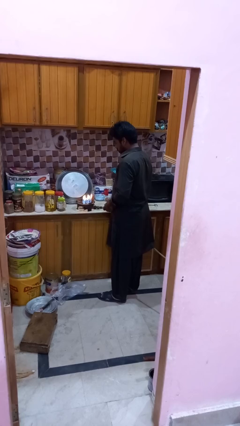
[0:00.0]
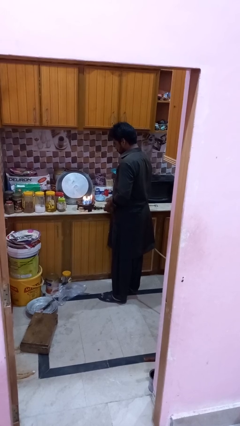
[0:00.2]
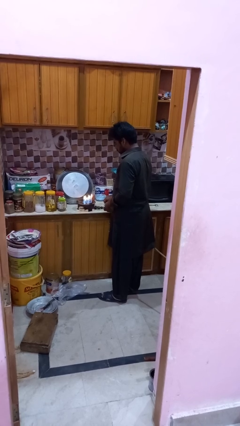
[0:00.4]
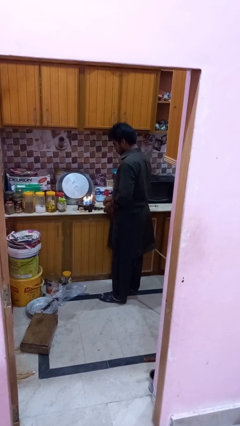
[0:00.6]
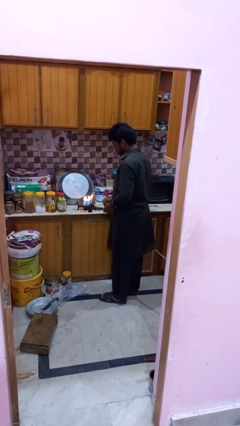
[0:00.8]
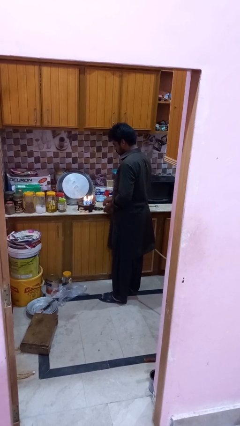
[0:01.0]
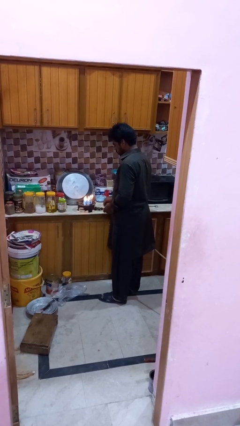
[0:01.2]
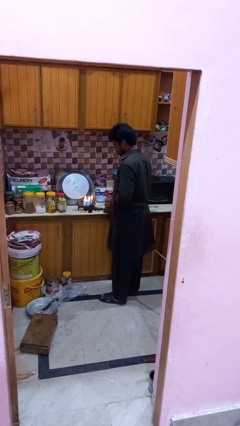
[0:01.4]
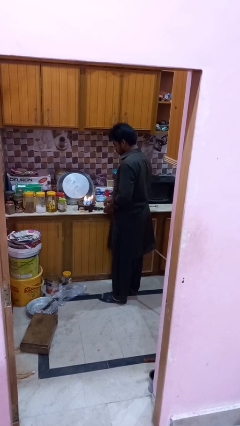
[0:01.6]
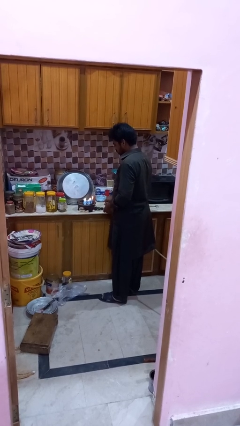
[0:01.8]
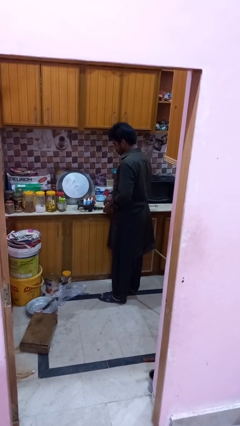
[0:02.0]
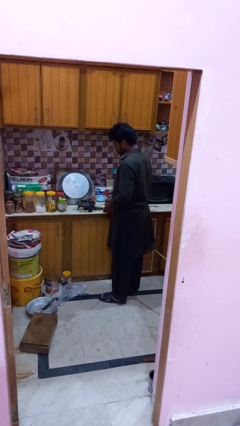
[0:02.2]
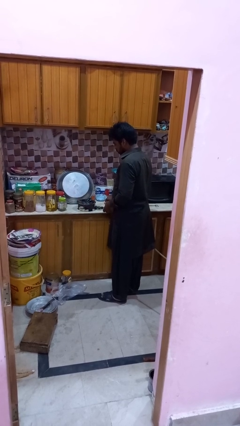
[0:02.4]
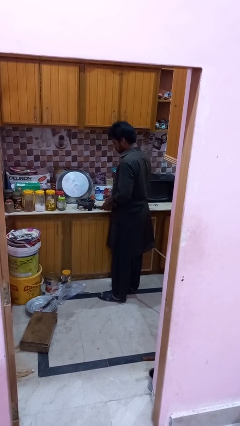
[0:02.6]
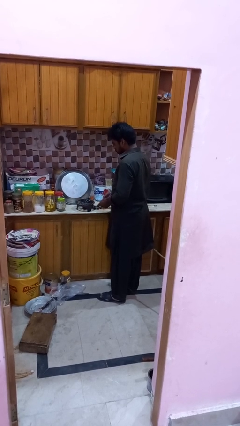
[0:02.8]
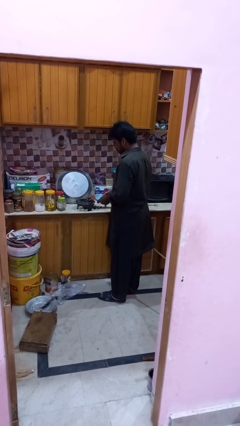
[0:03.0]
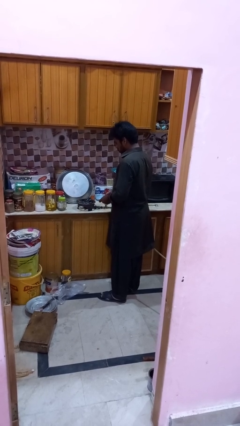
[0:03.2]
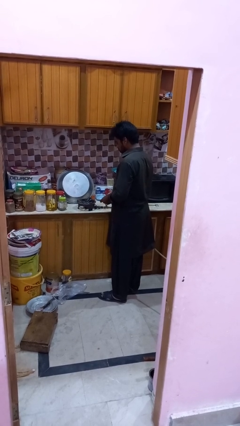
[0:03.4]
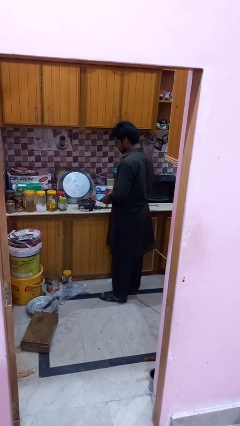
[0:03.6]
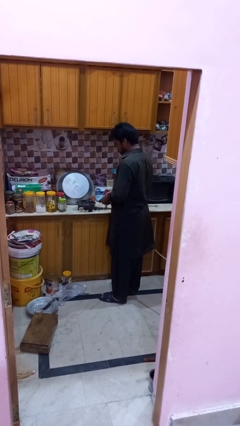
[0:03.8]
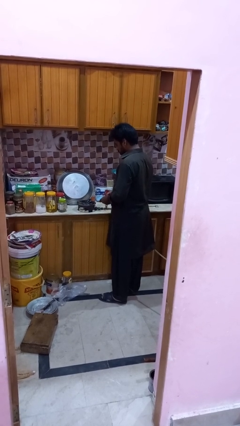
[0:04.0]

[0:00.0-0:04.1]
person turns off stovetop

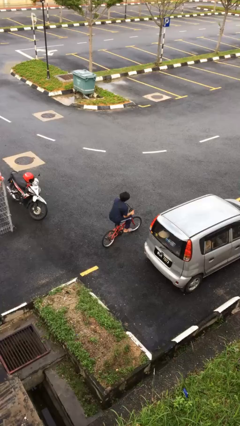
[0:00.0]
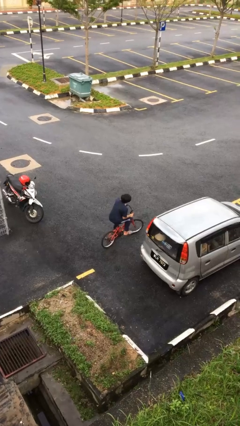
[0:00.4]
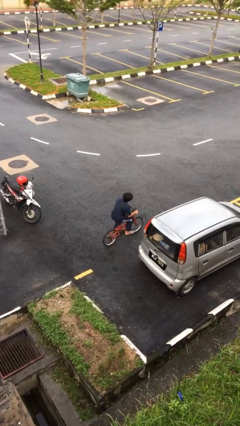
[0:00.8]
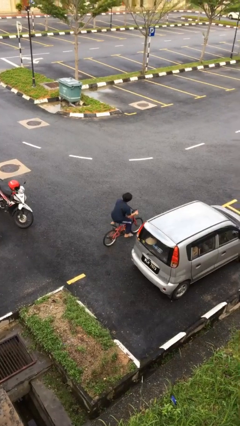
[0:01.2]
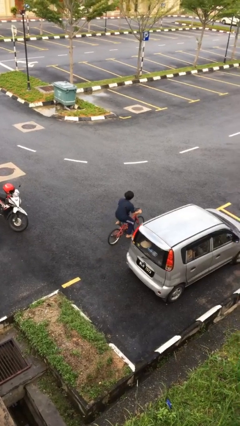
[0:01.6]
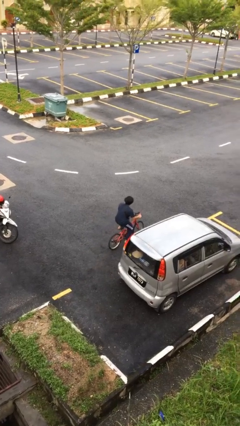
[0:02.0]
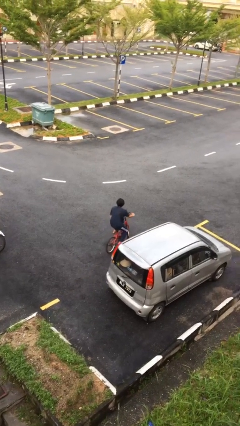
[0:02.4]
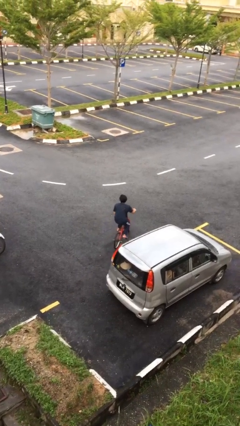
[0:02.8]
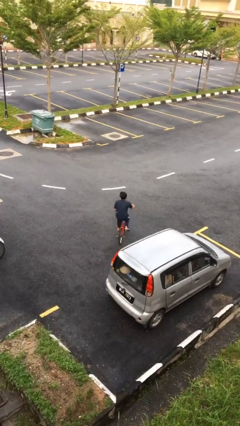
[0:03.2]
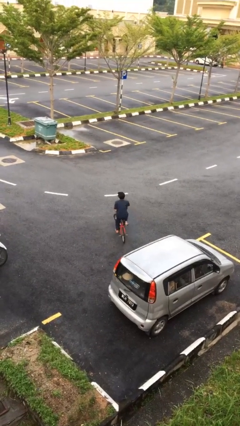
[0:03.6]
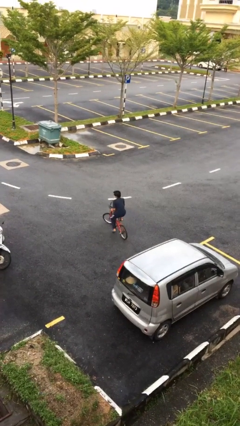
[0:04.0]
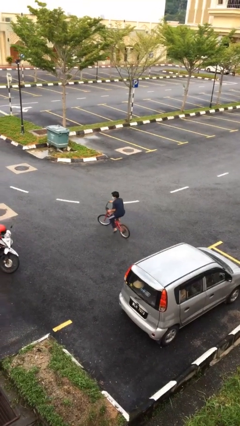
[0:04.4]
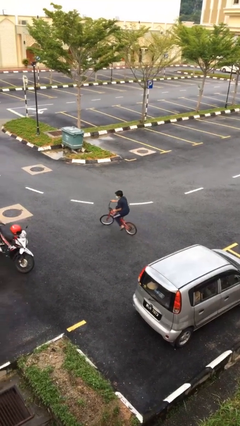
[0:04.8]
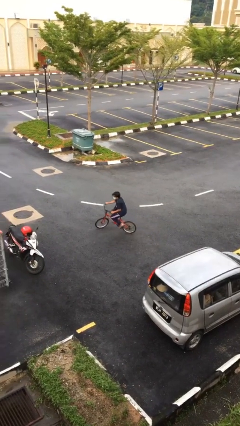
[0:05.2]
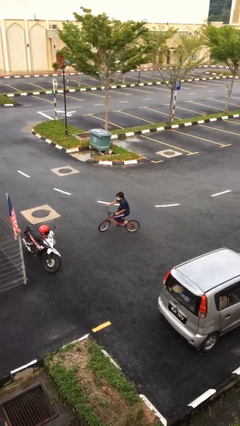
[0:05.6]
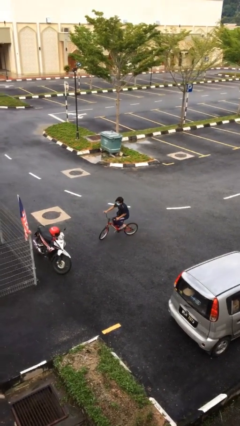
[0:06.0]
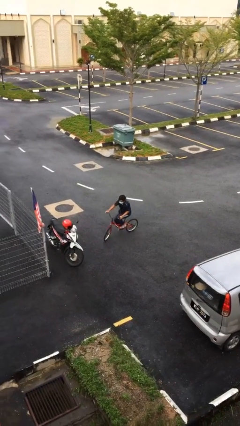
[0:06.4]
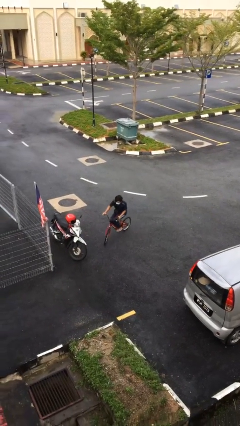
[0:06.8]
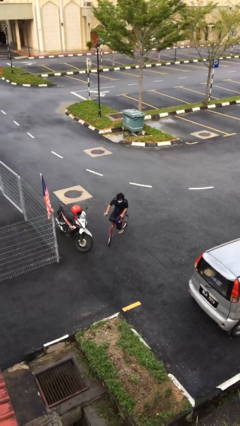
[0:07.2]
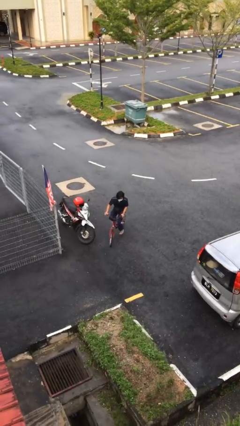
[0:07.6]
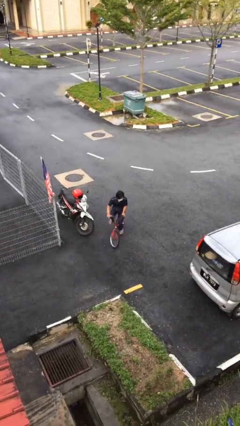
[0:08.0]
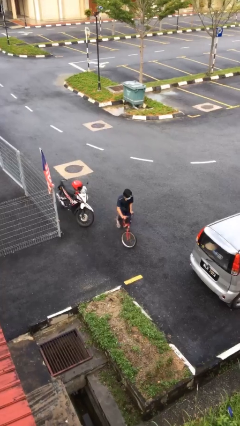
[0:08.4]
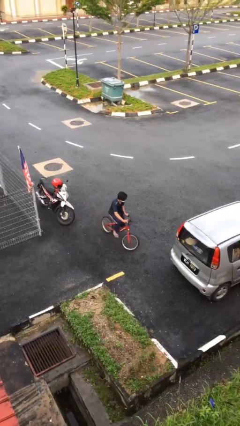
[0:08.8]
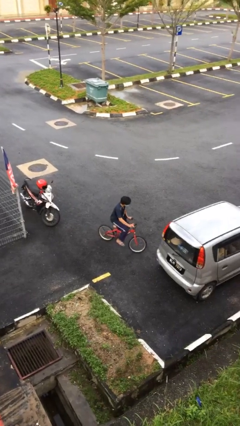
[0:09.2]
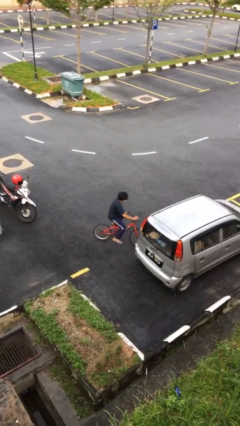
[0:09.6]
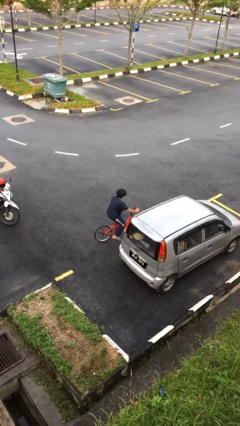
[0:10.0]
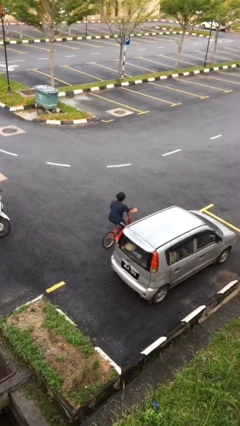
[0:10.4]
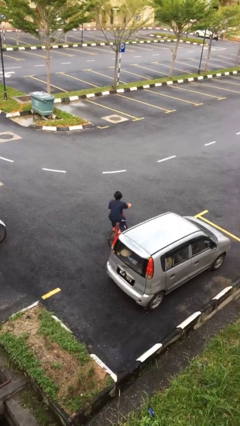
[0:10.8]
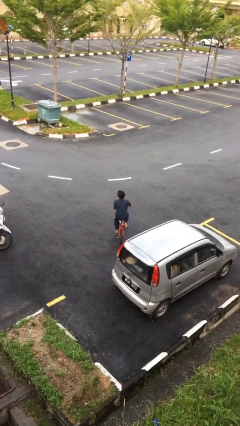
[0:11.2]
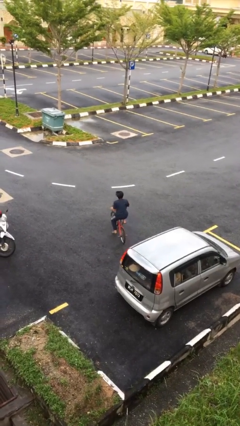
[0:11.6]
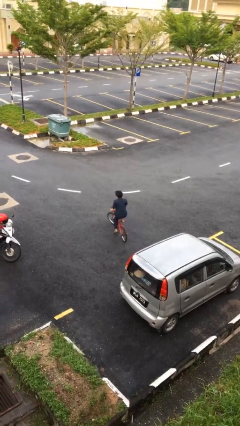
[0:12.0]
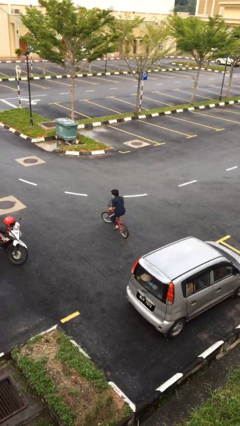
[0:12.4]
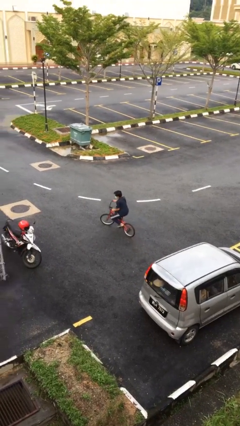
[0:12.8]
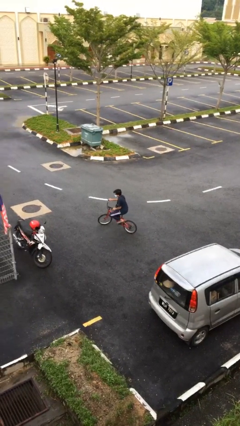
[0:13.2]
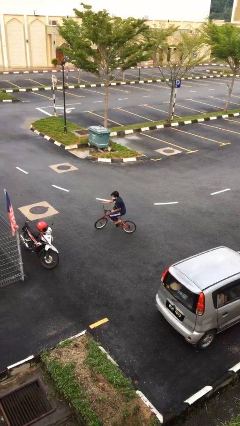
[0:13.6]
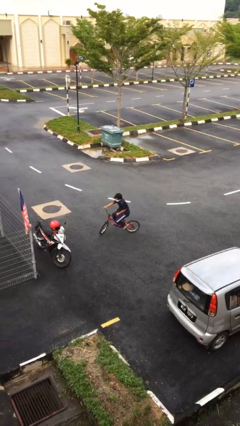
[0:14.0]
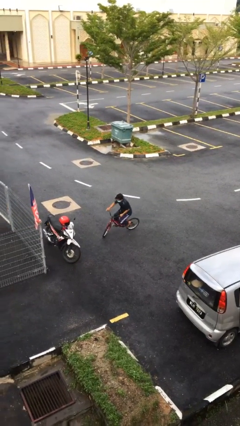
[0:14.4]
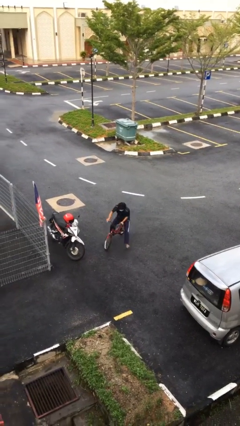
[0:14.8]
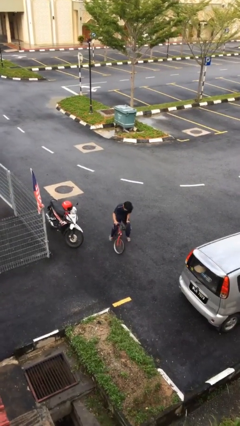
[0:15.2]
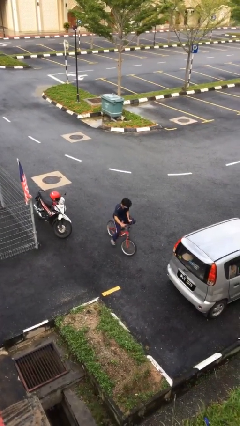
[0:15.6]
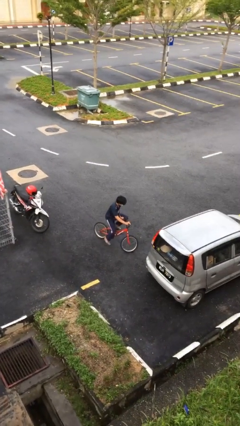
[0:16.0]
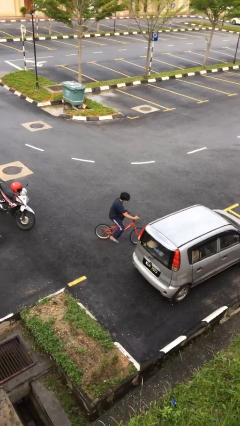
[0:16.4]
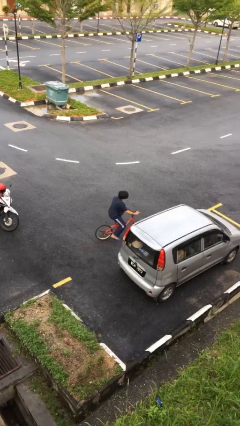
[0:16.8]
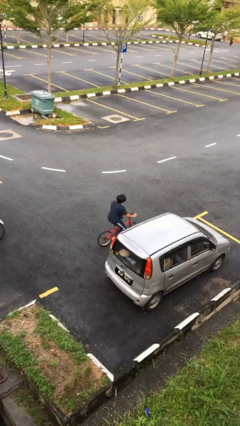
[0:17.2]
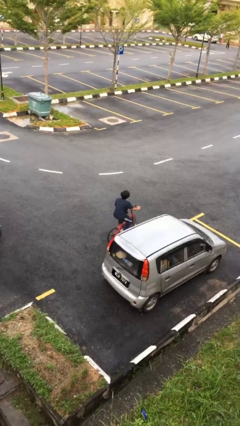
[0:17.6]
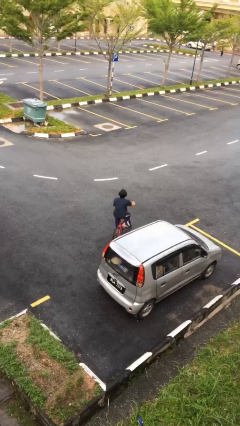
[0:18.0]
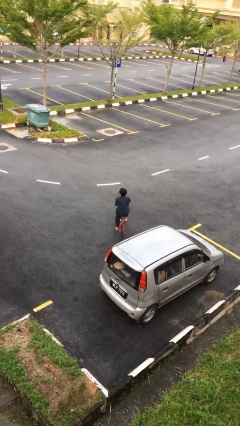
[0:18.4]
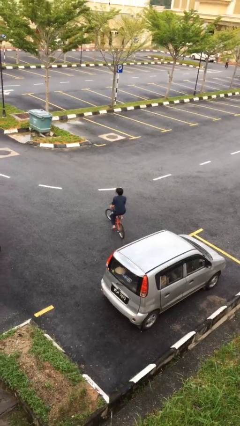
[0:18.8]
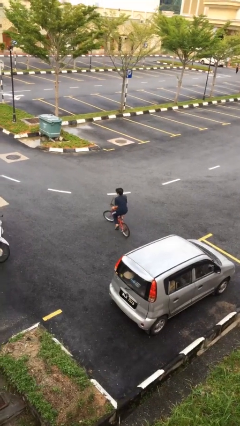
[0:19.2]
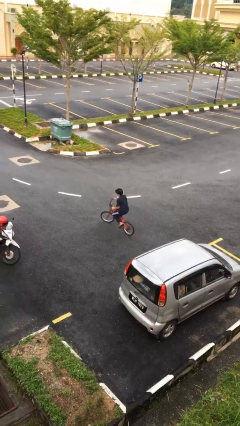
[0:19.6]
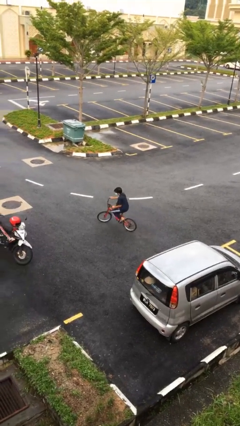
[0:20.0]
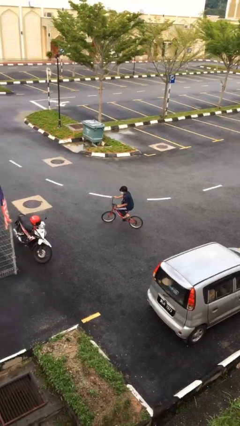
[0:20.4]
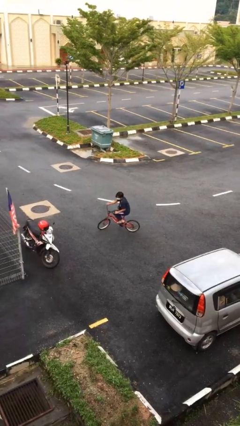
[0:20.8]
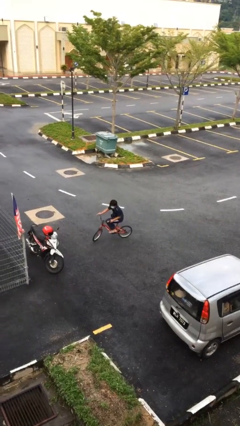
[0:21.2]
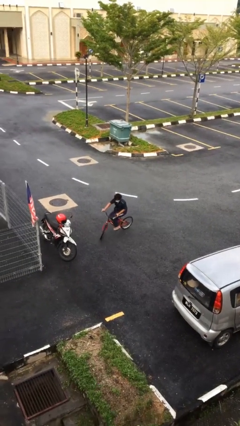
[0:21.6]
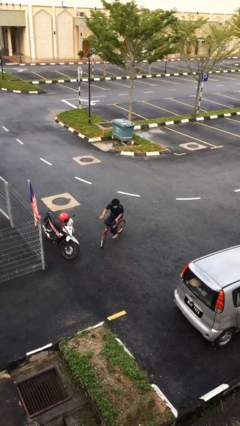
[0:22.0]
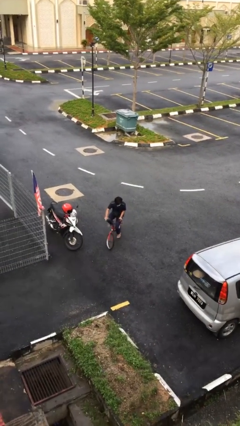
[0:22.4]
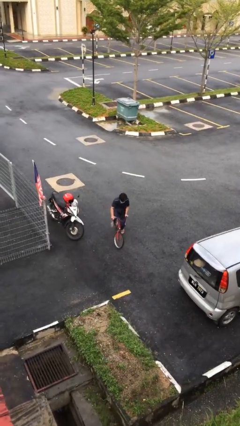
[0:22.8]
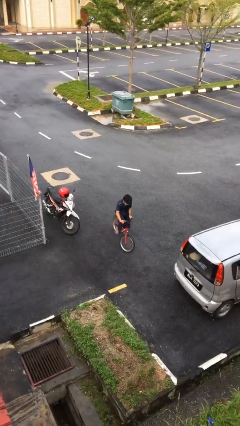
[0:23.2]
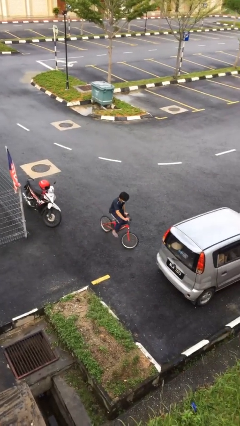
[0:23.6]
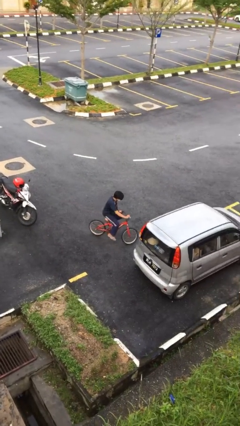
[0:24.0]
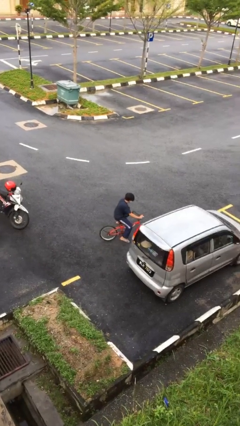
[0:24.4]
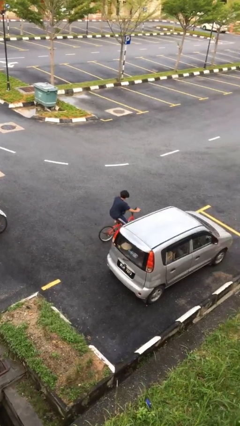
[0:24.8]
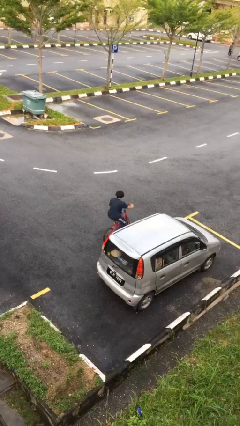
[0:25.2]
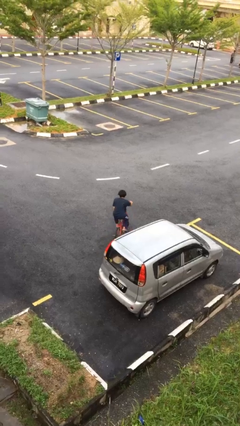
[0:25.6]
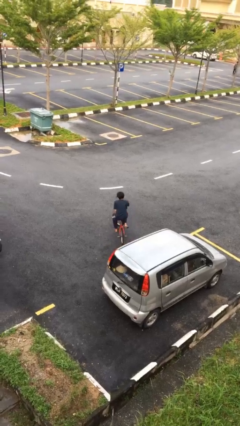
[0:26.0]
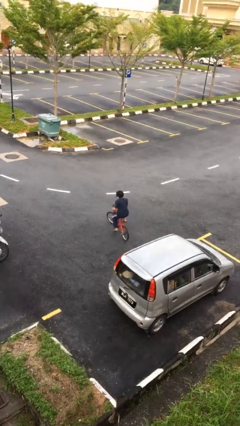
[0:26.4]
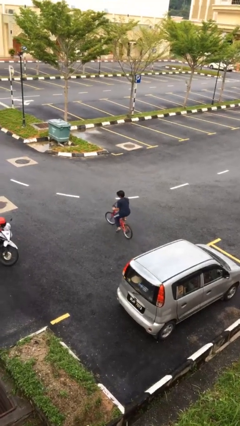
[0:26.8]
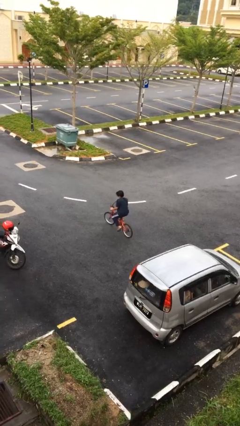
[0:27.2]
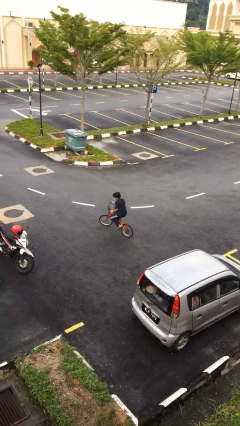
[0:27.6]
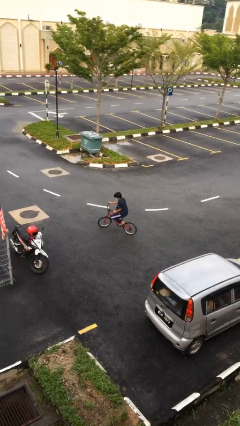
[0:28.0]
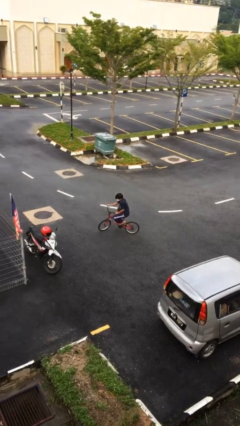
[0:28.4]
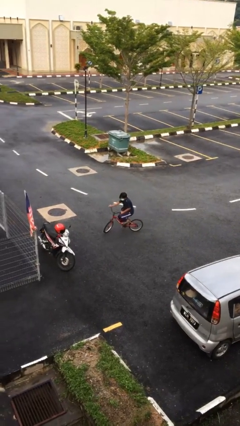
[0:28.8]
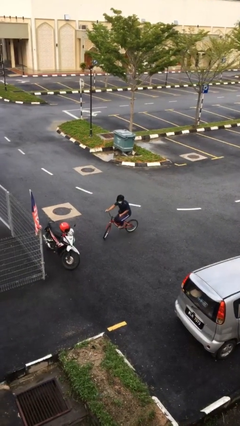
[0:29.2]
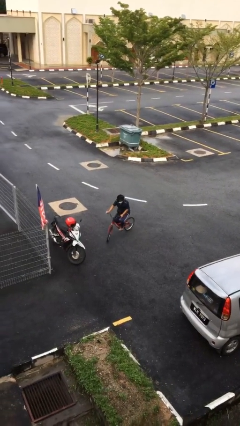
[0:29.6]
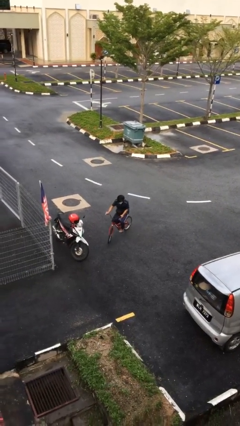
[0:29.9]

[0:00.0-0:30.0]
person rides bicycle
